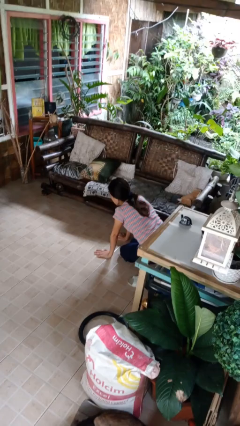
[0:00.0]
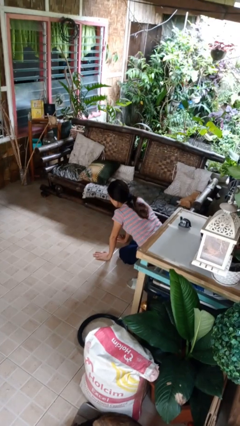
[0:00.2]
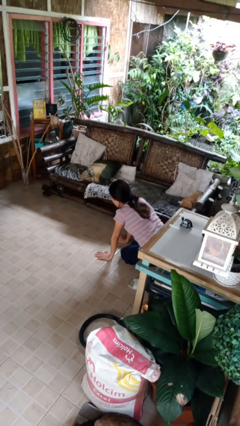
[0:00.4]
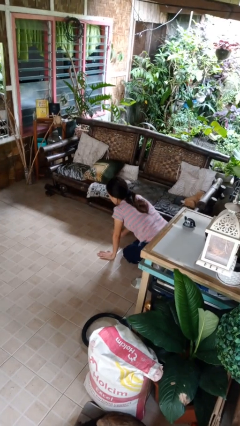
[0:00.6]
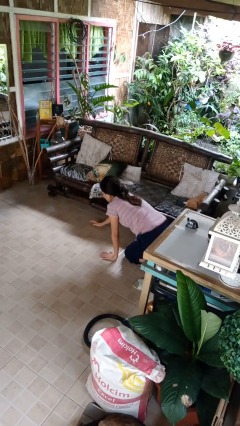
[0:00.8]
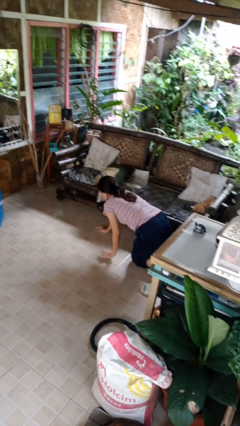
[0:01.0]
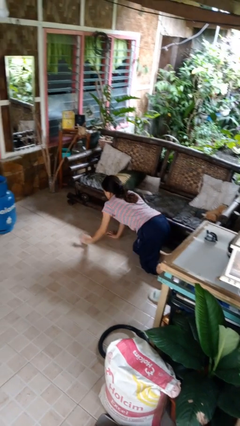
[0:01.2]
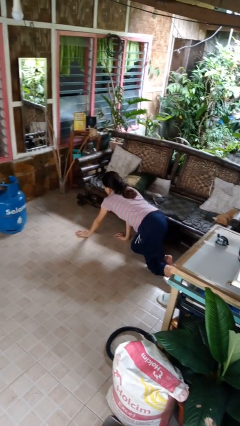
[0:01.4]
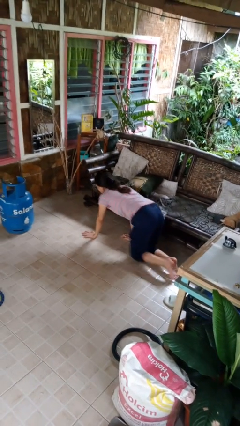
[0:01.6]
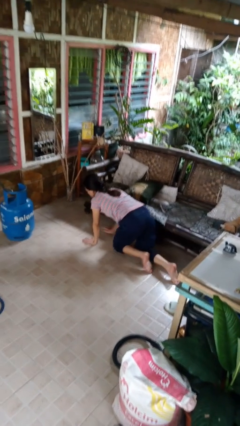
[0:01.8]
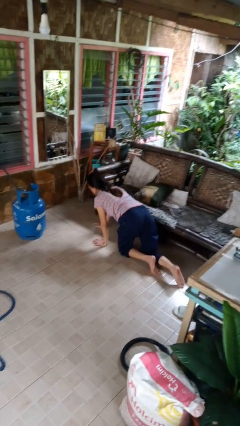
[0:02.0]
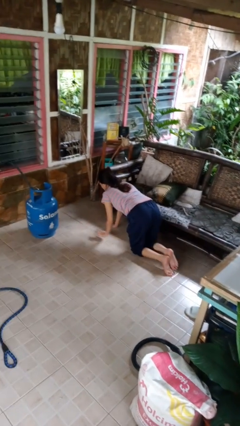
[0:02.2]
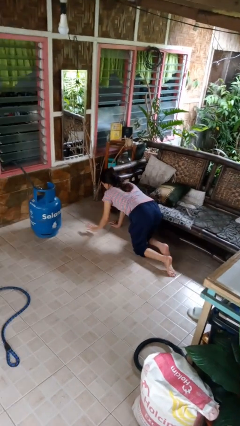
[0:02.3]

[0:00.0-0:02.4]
person crawls

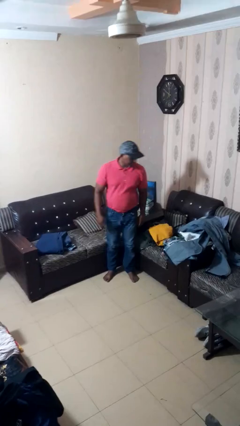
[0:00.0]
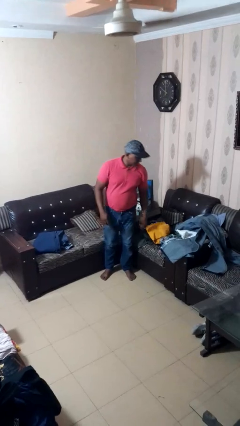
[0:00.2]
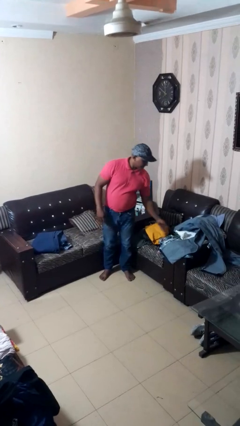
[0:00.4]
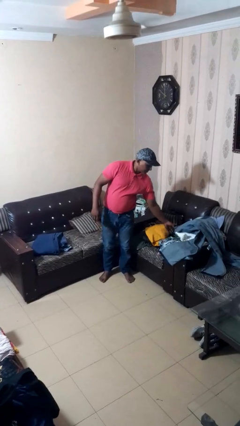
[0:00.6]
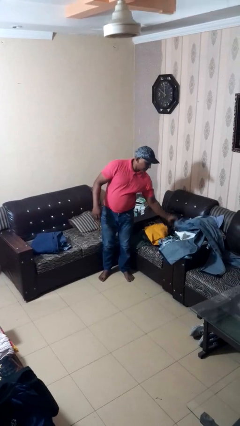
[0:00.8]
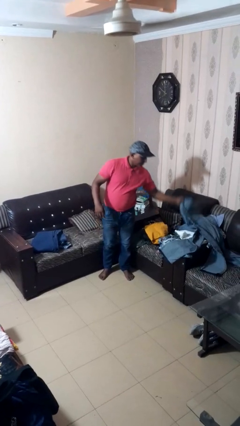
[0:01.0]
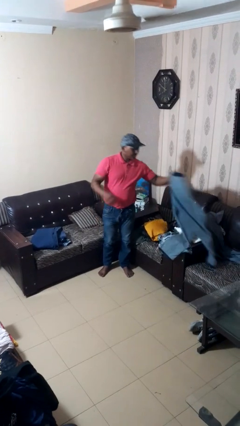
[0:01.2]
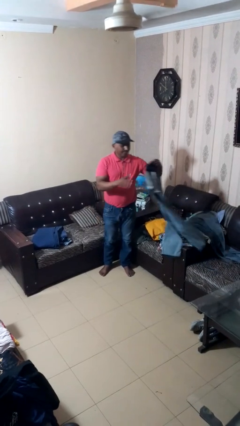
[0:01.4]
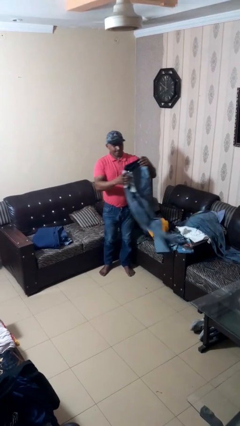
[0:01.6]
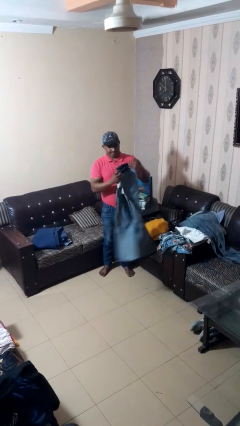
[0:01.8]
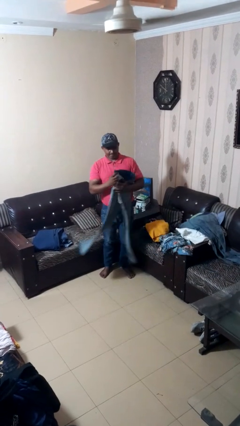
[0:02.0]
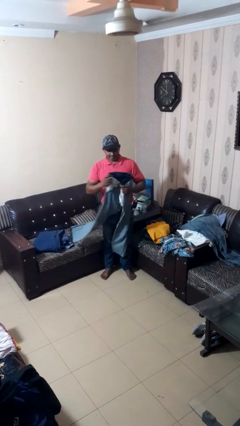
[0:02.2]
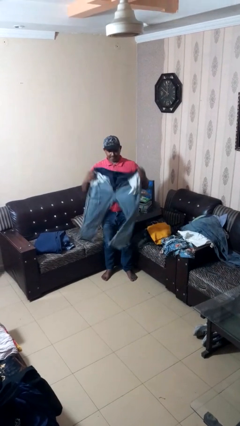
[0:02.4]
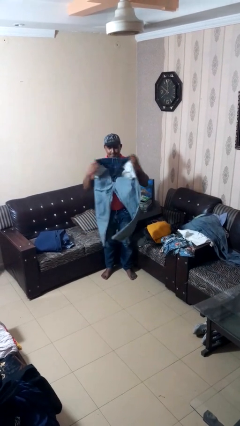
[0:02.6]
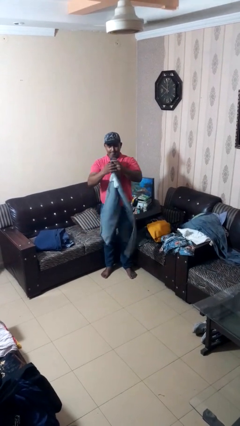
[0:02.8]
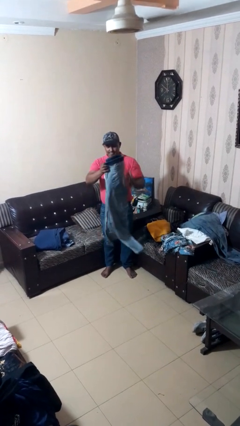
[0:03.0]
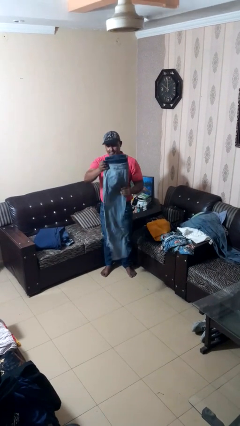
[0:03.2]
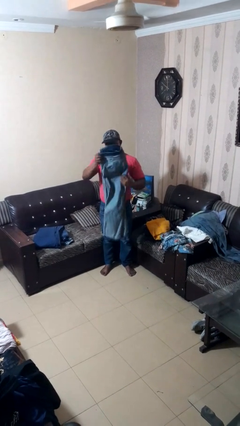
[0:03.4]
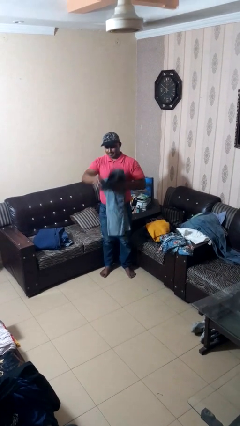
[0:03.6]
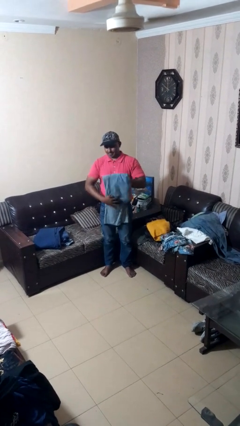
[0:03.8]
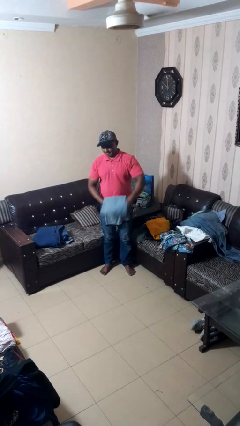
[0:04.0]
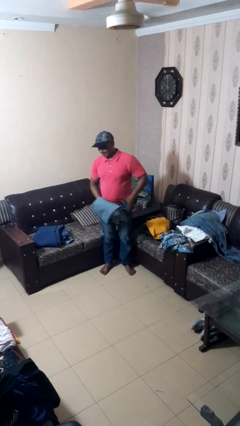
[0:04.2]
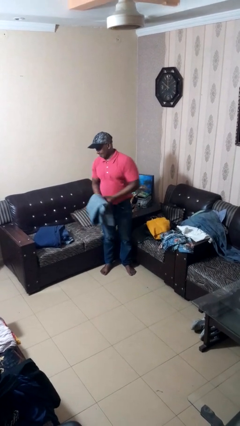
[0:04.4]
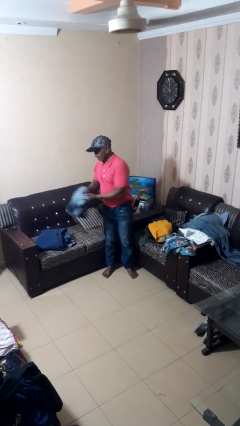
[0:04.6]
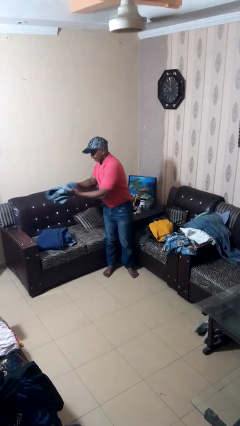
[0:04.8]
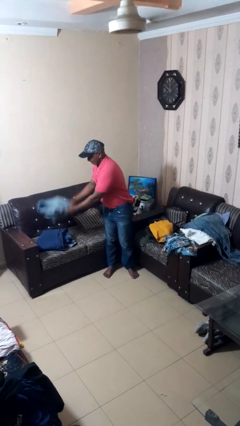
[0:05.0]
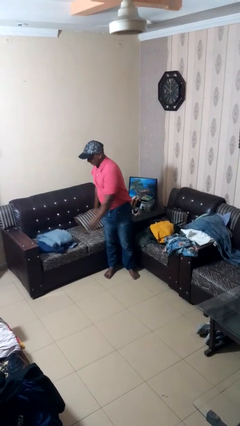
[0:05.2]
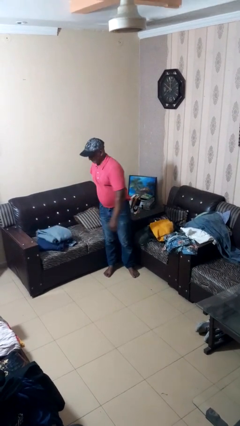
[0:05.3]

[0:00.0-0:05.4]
person folds pants

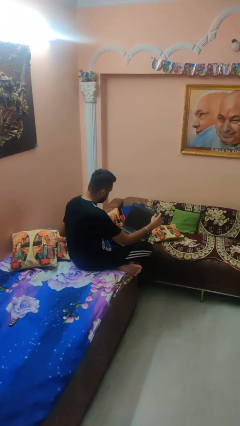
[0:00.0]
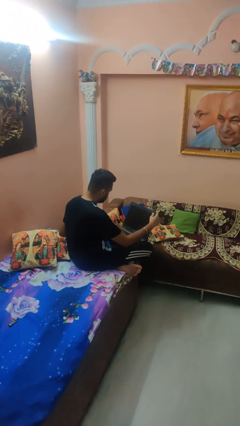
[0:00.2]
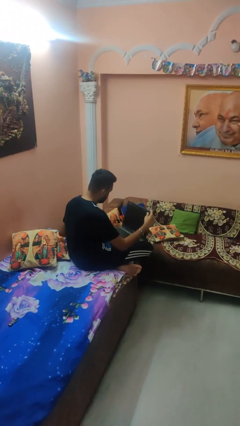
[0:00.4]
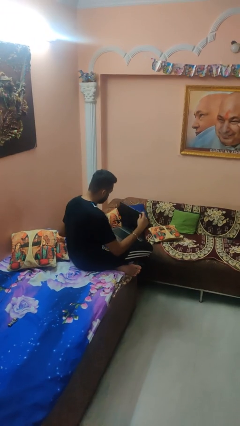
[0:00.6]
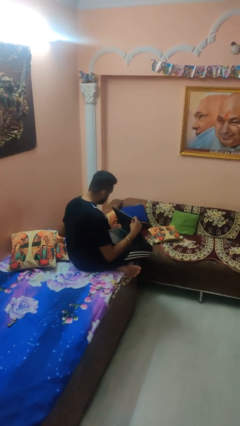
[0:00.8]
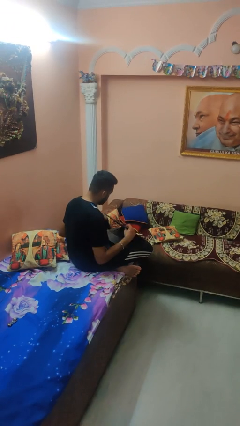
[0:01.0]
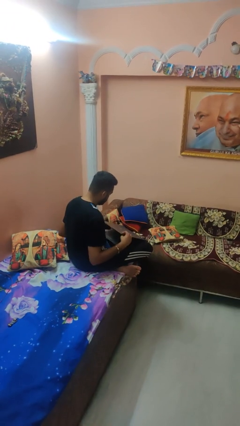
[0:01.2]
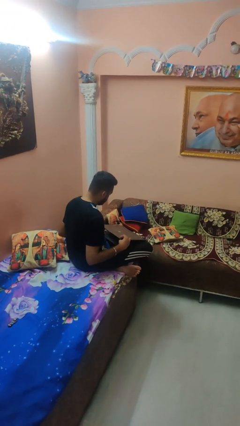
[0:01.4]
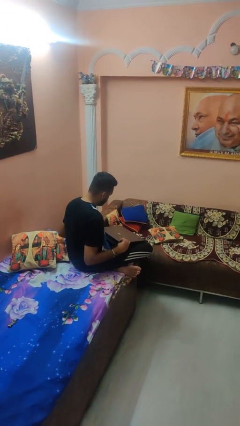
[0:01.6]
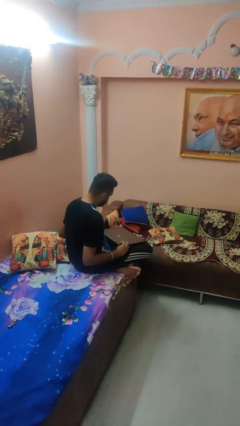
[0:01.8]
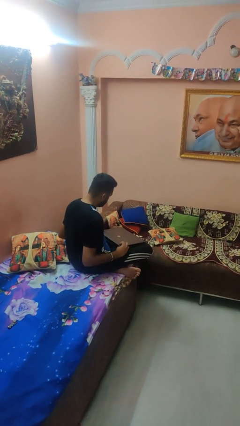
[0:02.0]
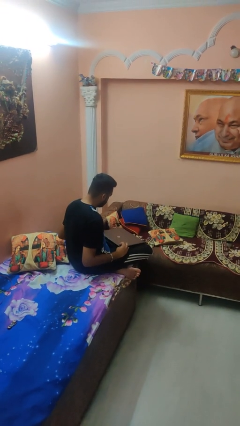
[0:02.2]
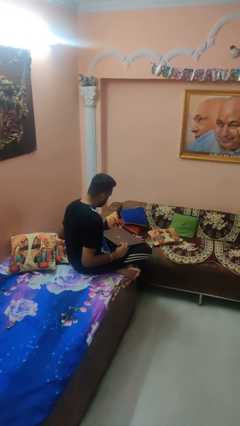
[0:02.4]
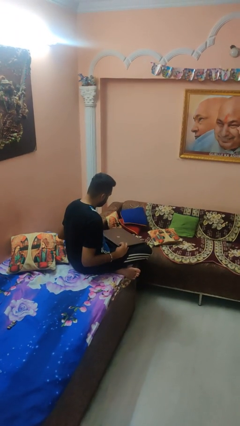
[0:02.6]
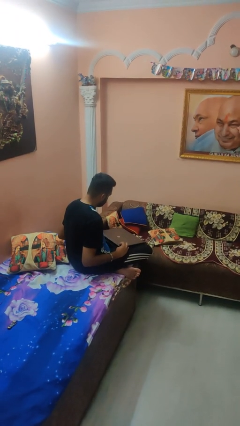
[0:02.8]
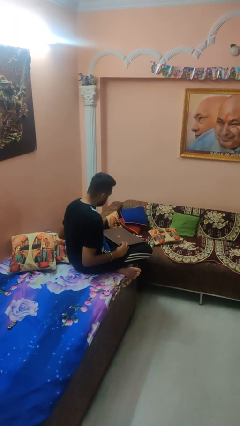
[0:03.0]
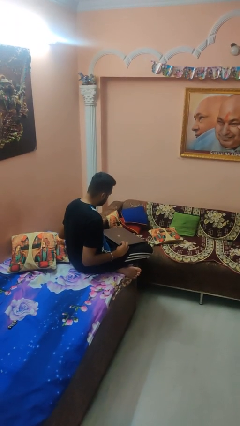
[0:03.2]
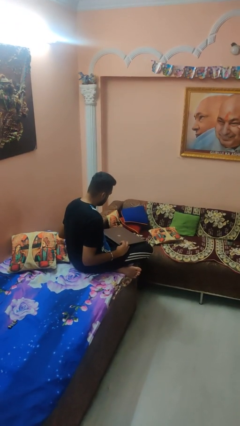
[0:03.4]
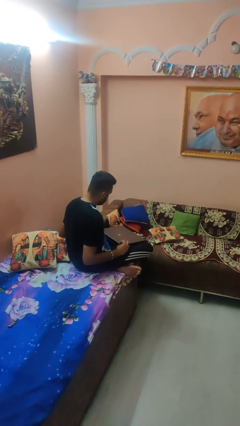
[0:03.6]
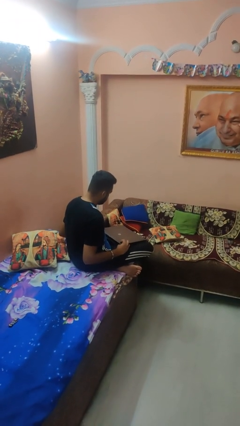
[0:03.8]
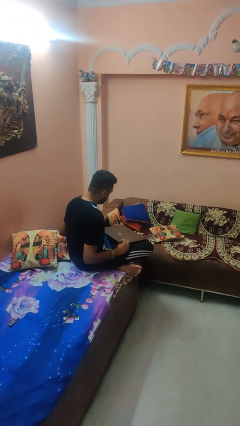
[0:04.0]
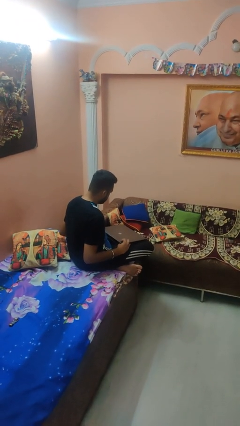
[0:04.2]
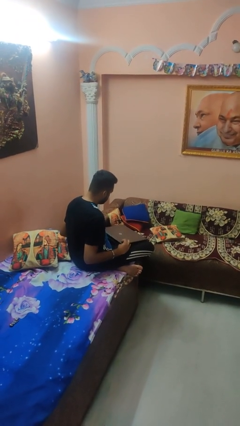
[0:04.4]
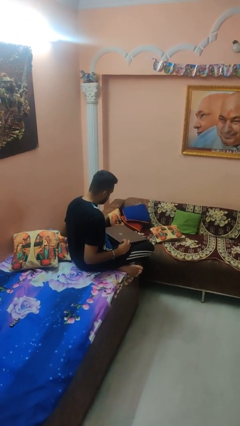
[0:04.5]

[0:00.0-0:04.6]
person closes laptop

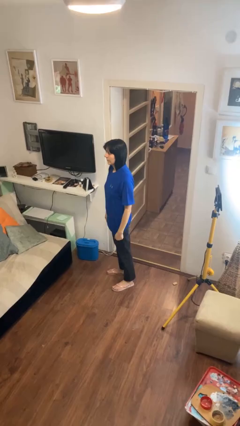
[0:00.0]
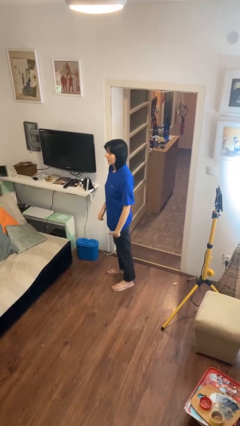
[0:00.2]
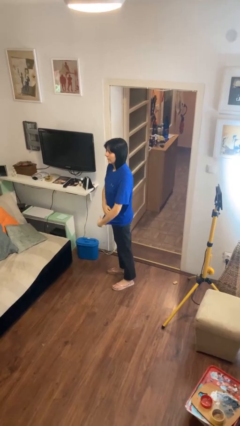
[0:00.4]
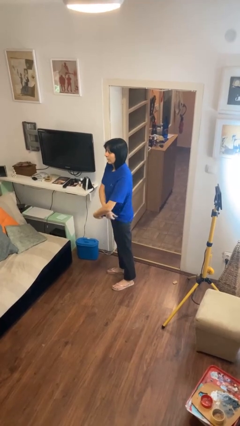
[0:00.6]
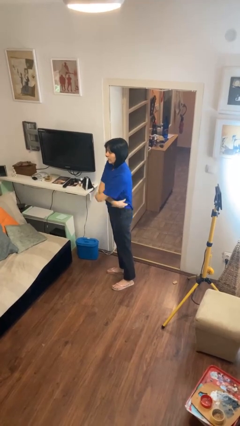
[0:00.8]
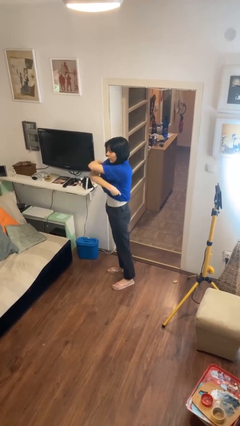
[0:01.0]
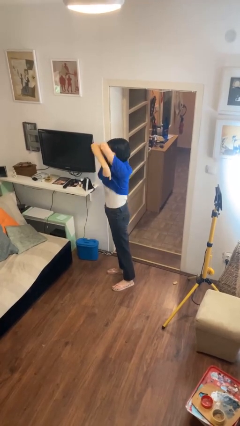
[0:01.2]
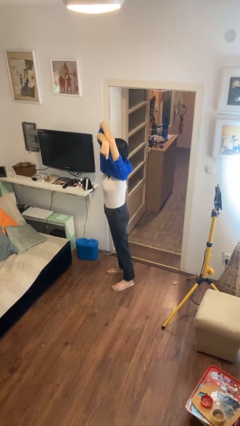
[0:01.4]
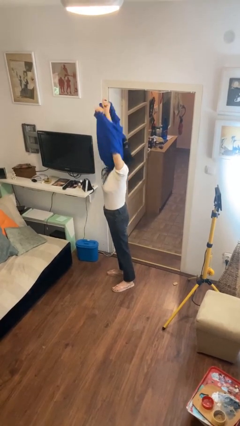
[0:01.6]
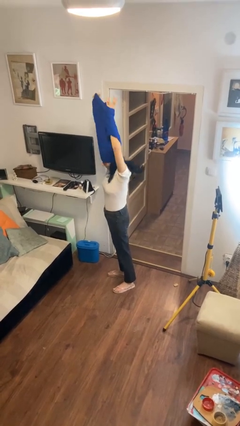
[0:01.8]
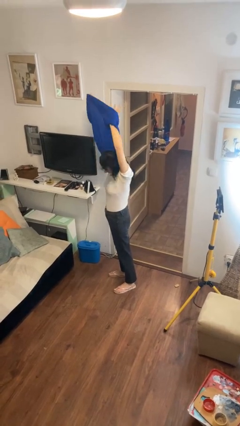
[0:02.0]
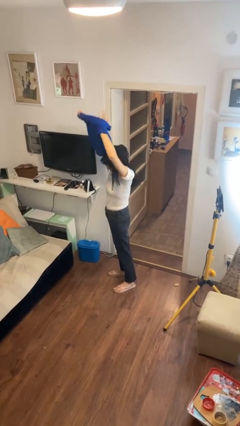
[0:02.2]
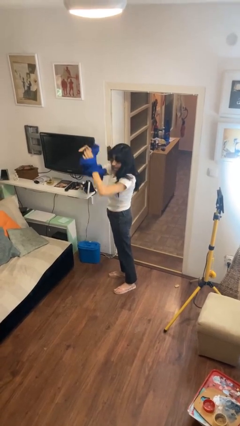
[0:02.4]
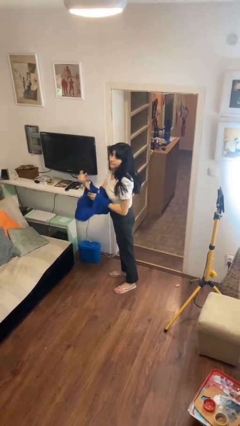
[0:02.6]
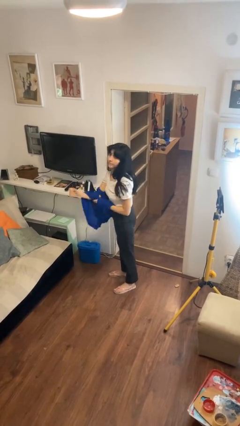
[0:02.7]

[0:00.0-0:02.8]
person takes off shirt

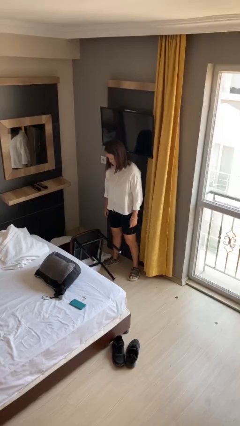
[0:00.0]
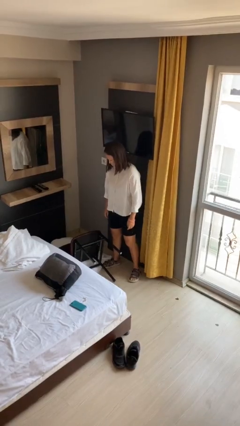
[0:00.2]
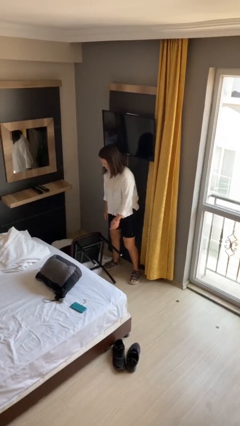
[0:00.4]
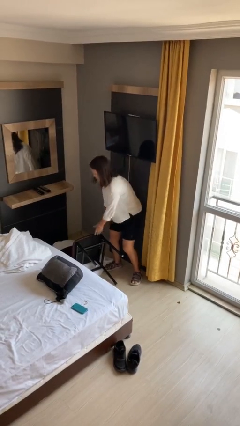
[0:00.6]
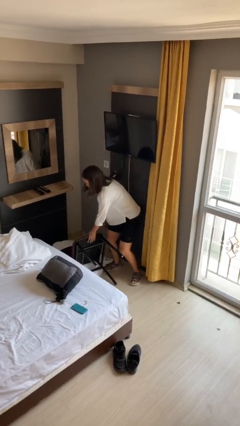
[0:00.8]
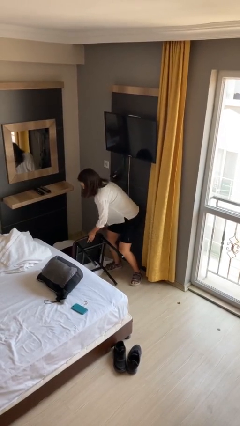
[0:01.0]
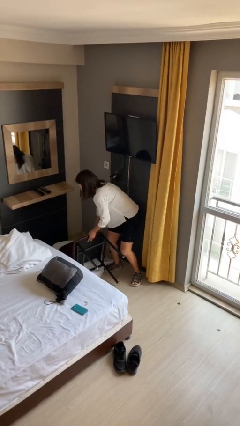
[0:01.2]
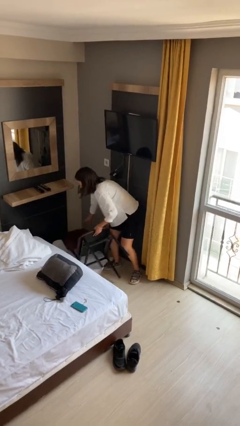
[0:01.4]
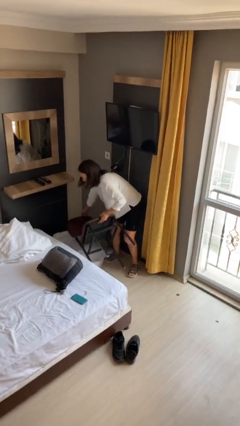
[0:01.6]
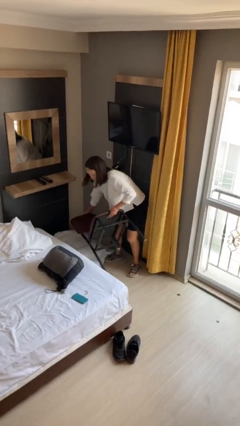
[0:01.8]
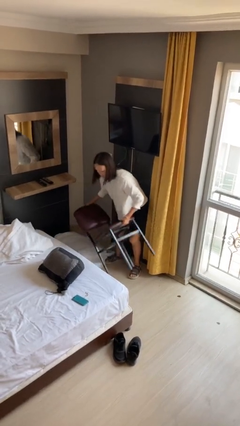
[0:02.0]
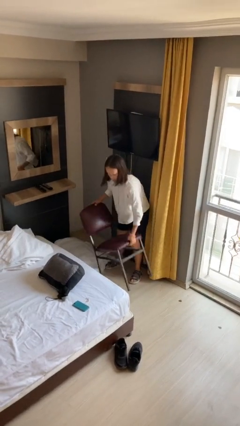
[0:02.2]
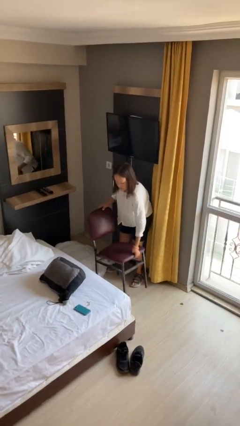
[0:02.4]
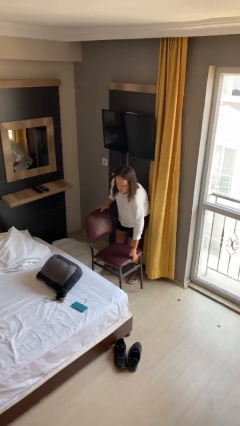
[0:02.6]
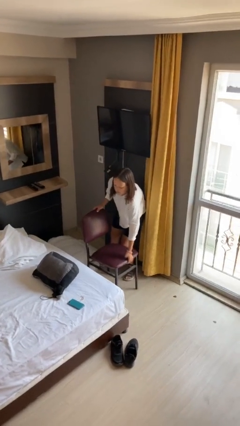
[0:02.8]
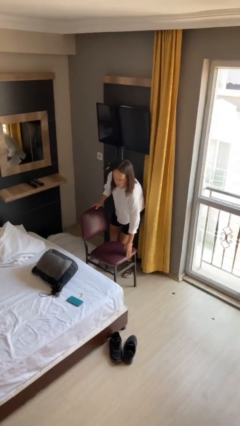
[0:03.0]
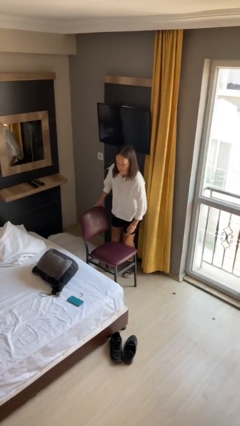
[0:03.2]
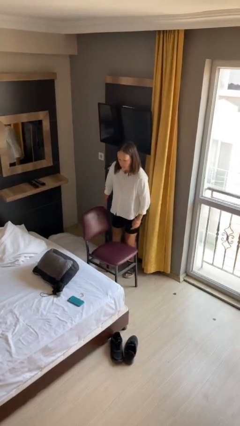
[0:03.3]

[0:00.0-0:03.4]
person sets upright furniture
